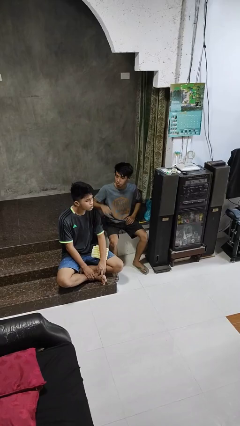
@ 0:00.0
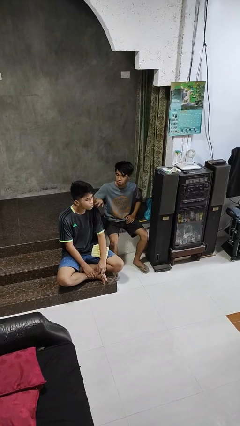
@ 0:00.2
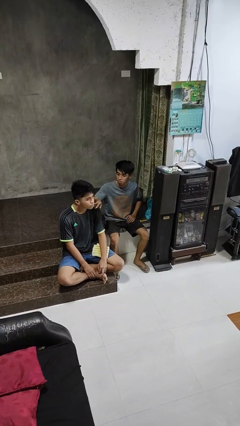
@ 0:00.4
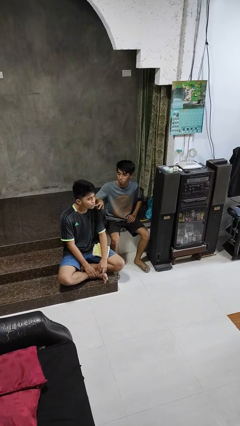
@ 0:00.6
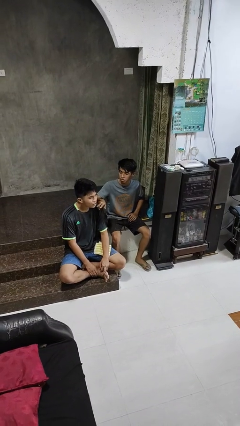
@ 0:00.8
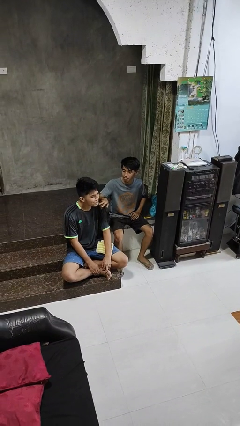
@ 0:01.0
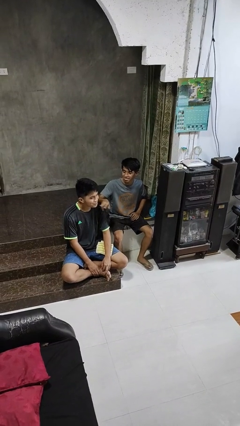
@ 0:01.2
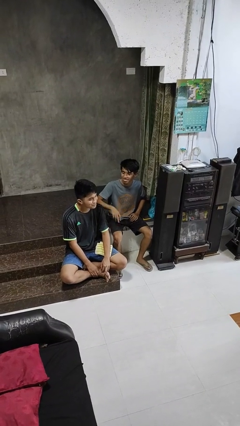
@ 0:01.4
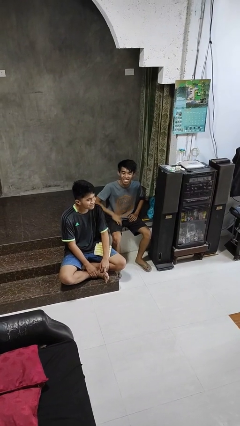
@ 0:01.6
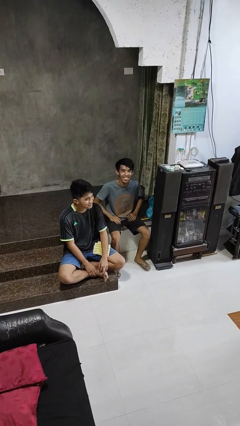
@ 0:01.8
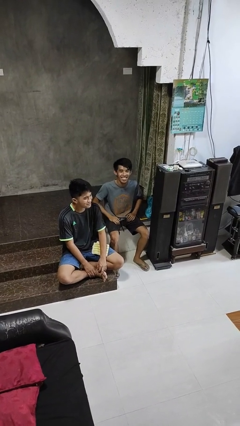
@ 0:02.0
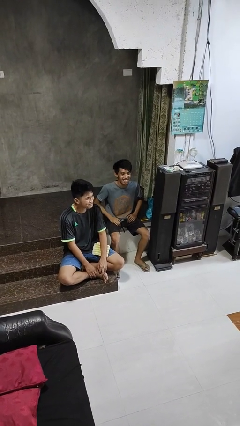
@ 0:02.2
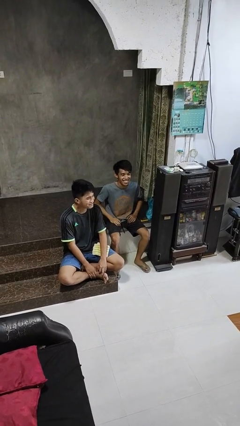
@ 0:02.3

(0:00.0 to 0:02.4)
person touches face of person

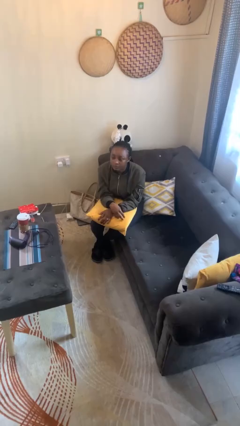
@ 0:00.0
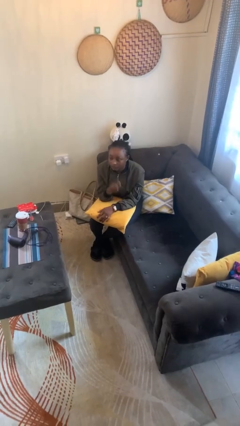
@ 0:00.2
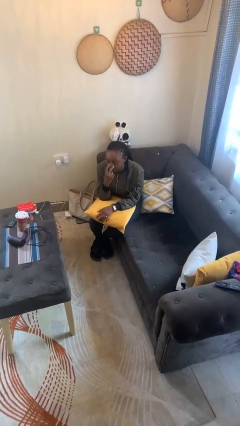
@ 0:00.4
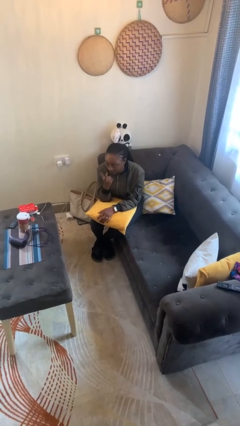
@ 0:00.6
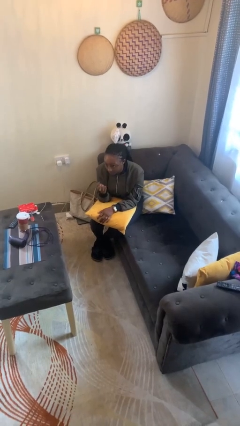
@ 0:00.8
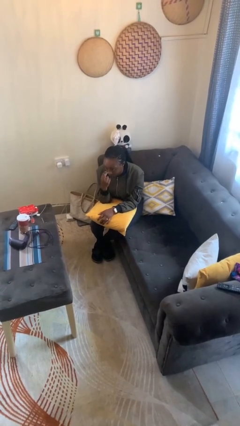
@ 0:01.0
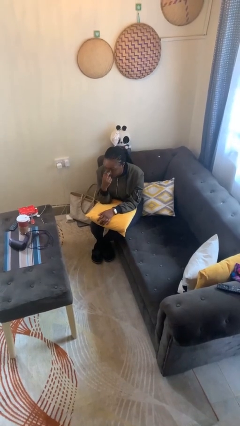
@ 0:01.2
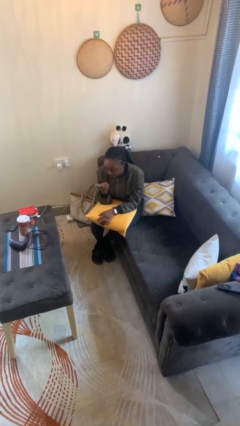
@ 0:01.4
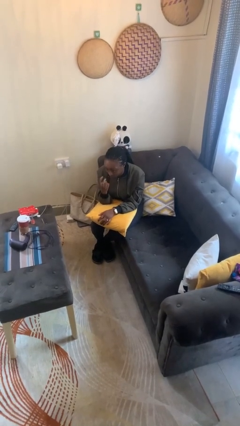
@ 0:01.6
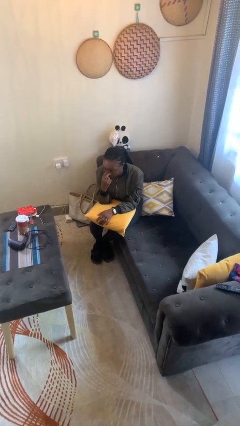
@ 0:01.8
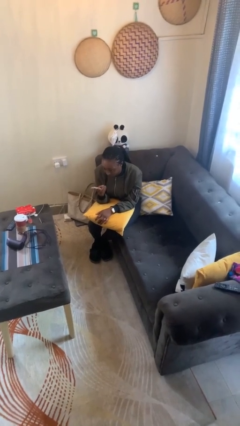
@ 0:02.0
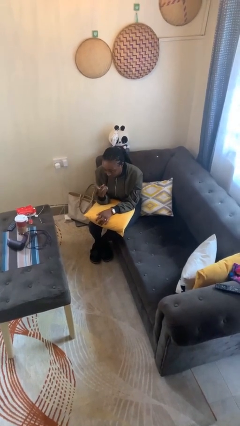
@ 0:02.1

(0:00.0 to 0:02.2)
person gestures watch closely

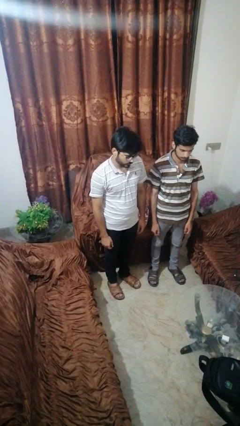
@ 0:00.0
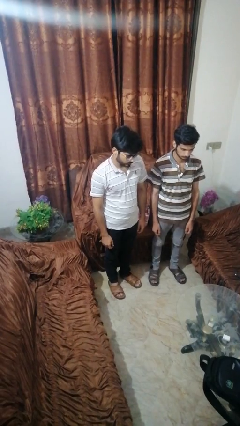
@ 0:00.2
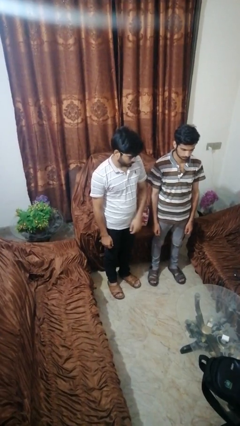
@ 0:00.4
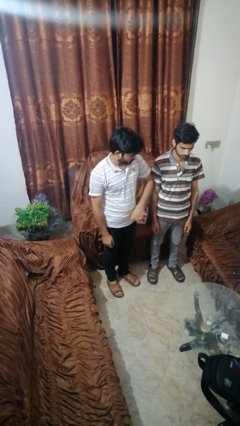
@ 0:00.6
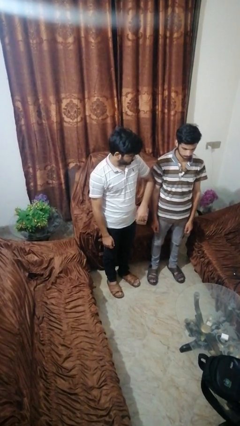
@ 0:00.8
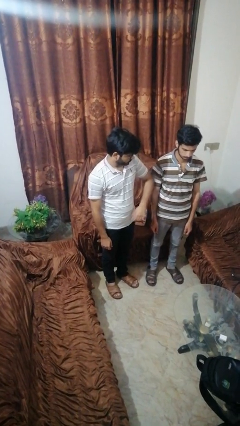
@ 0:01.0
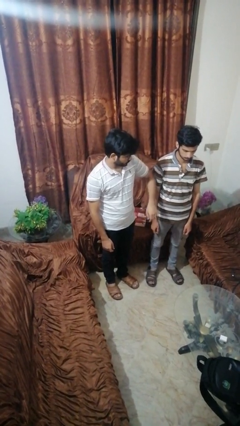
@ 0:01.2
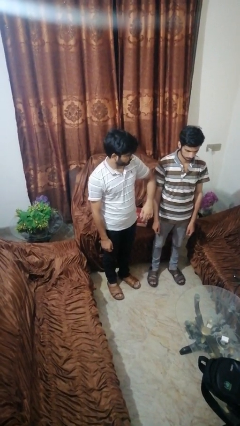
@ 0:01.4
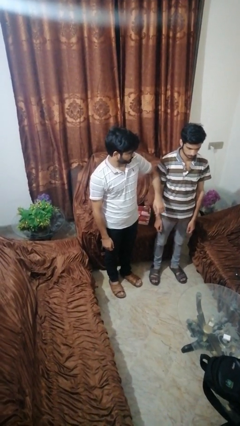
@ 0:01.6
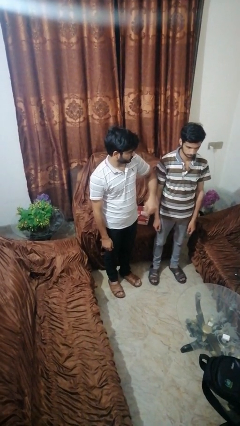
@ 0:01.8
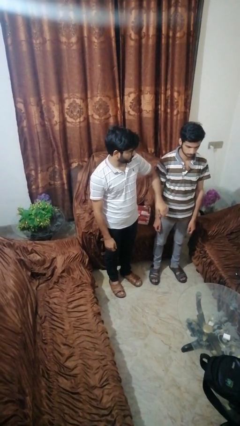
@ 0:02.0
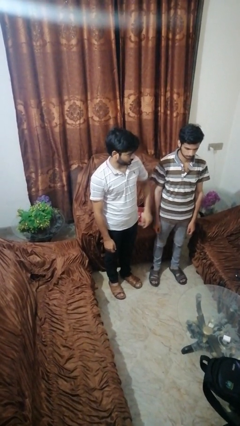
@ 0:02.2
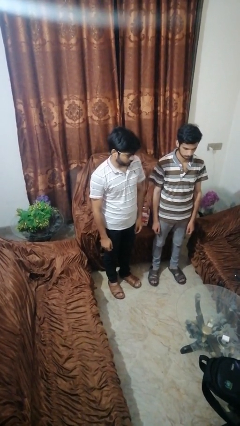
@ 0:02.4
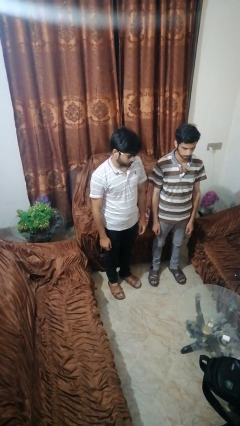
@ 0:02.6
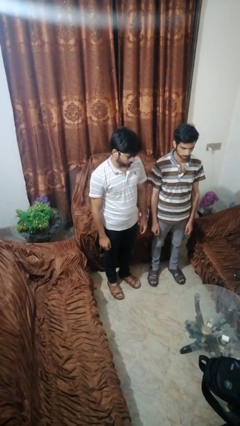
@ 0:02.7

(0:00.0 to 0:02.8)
person nudges person with elbow

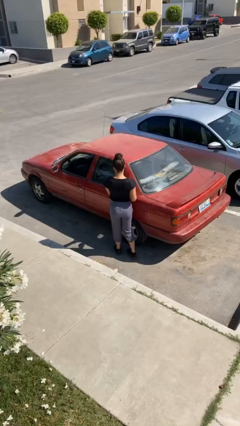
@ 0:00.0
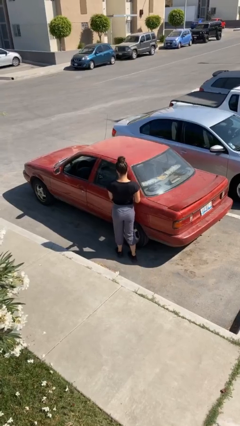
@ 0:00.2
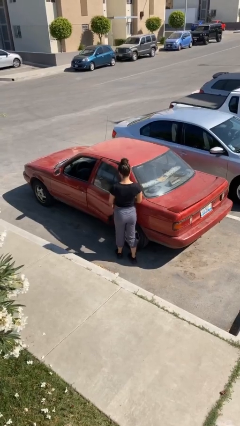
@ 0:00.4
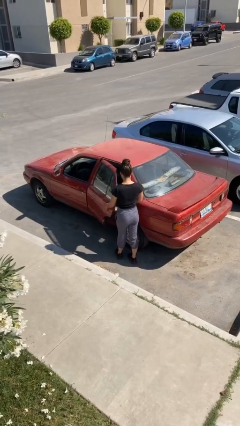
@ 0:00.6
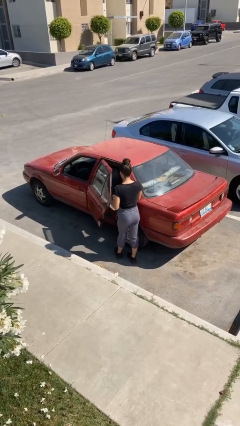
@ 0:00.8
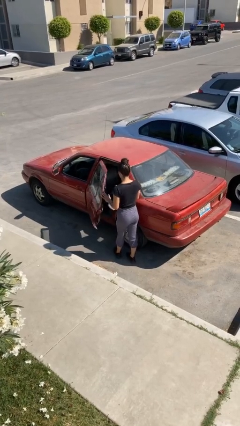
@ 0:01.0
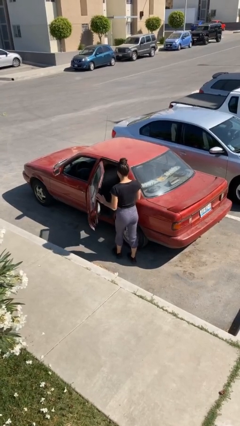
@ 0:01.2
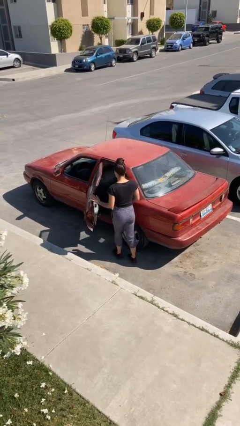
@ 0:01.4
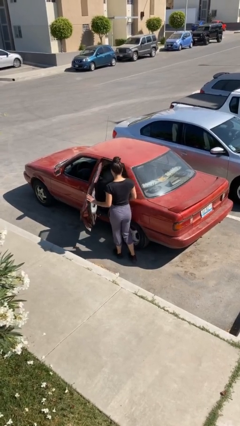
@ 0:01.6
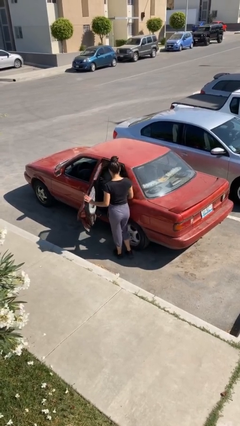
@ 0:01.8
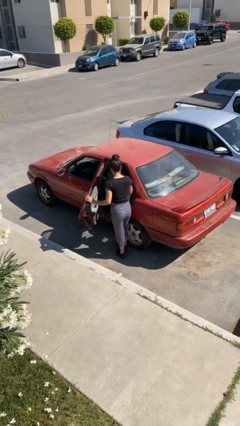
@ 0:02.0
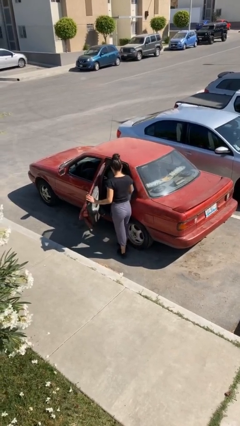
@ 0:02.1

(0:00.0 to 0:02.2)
person opens car door

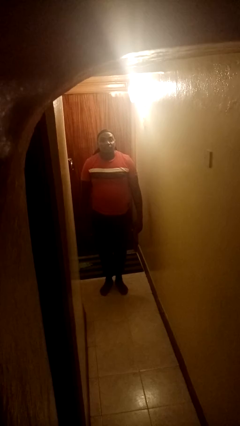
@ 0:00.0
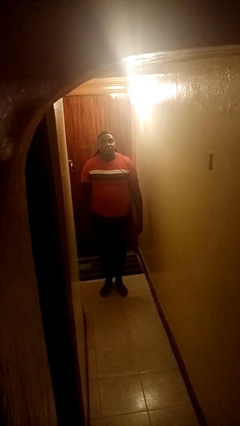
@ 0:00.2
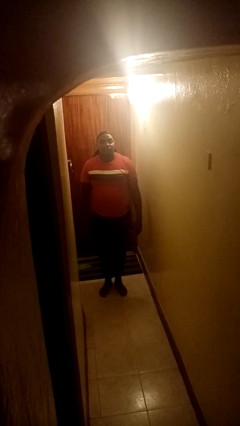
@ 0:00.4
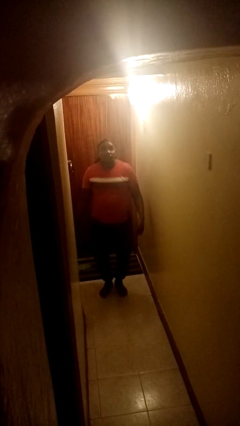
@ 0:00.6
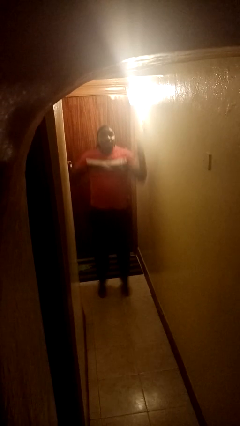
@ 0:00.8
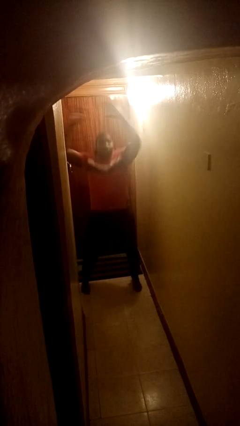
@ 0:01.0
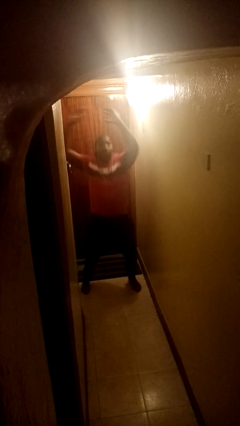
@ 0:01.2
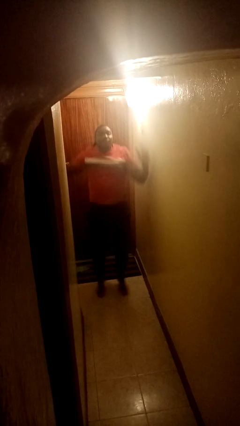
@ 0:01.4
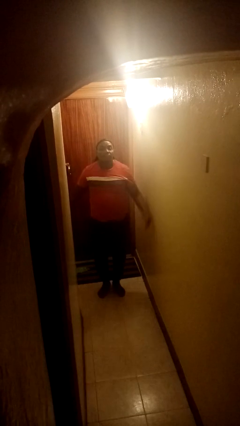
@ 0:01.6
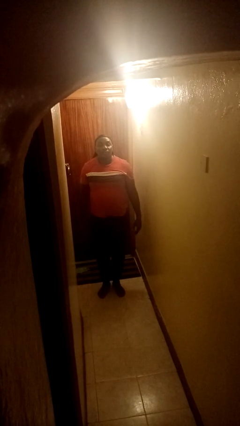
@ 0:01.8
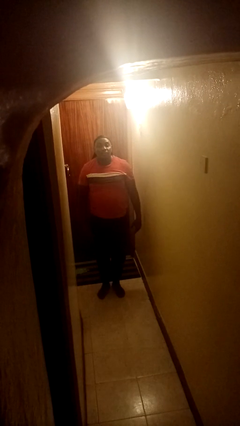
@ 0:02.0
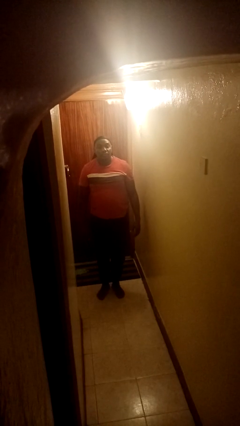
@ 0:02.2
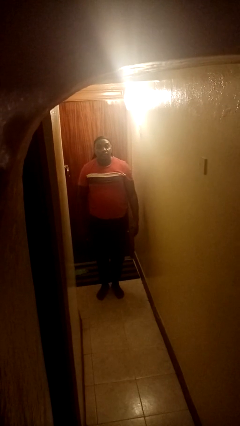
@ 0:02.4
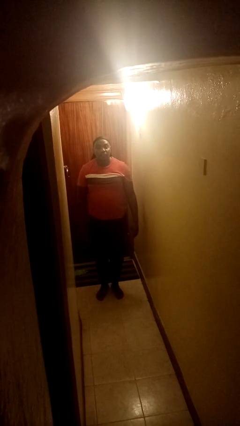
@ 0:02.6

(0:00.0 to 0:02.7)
person exercises with jumping jacks

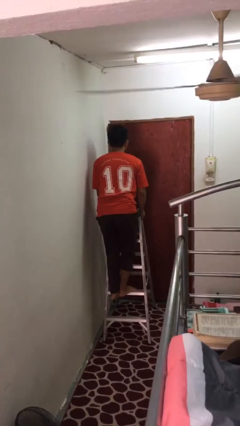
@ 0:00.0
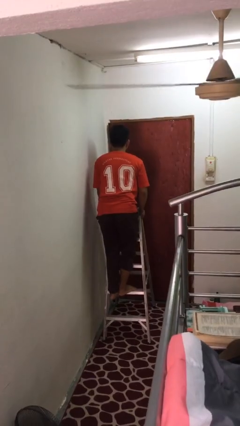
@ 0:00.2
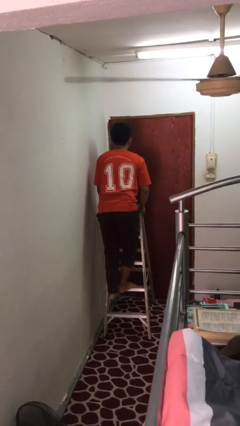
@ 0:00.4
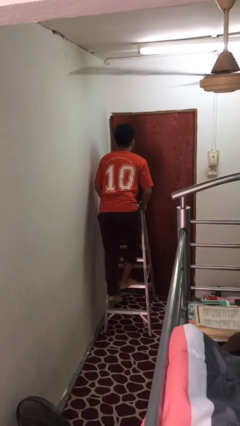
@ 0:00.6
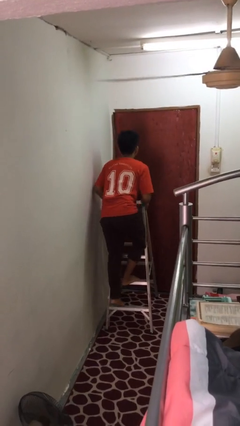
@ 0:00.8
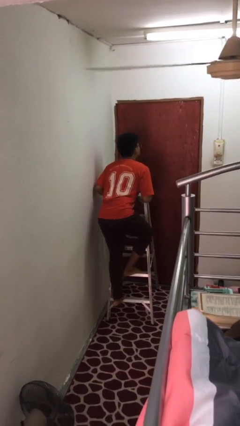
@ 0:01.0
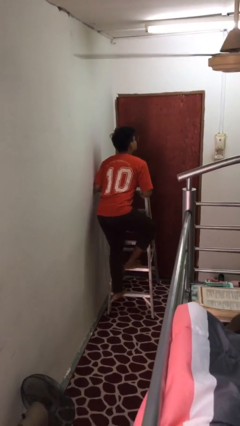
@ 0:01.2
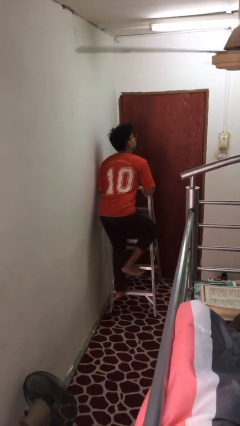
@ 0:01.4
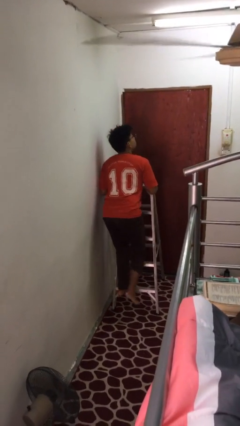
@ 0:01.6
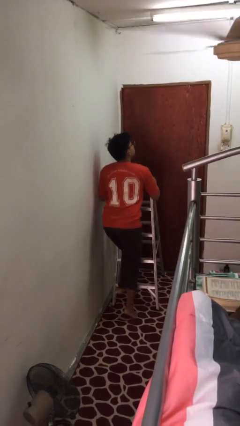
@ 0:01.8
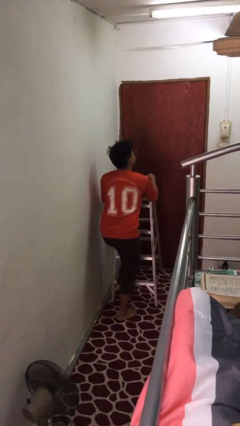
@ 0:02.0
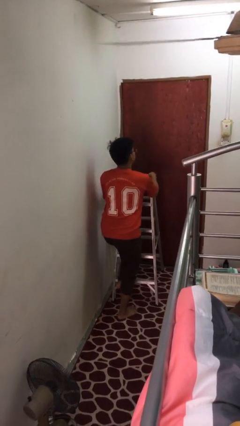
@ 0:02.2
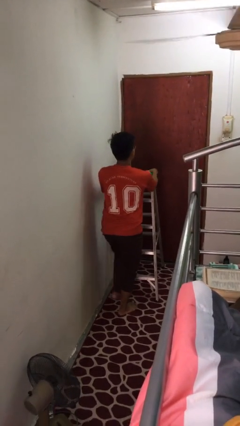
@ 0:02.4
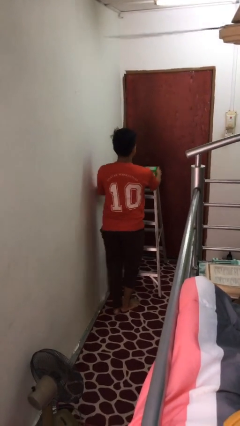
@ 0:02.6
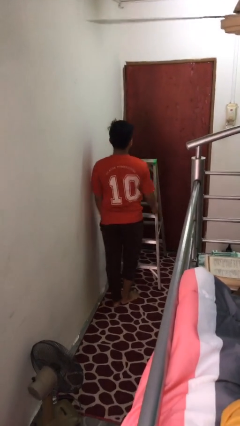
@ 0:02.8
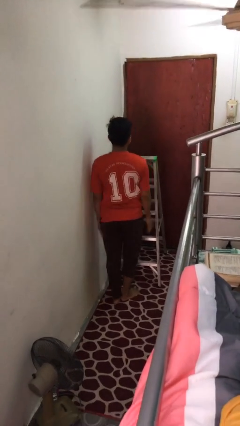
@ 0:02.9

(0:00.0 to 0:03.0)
person climbs down ladder

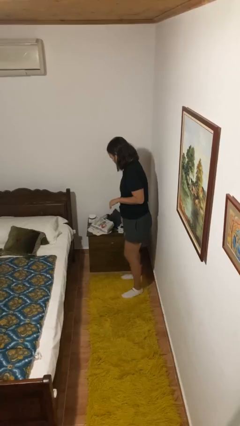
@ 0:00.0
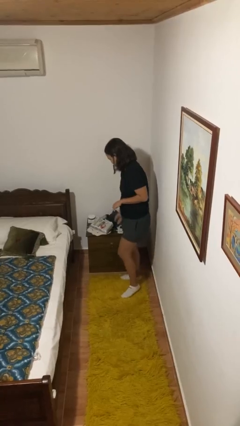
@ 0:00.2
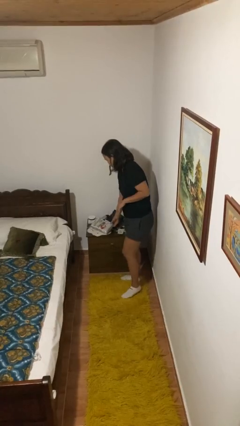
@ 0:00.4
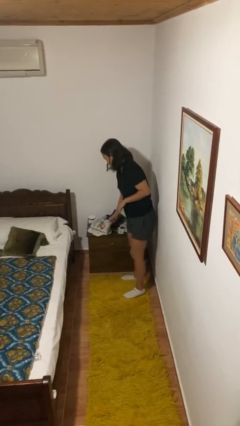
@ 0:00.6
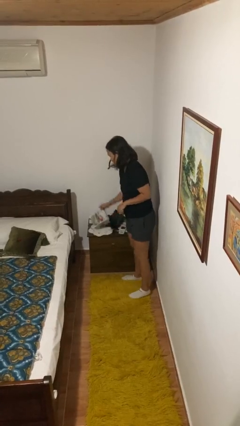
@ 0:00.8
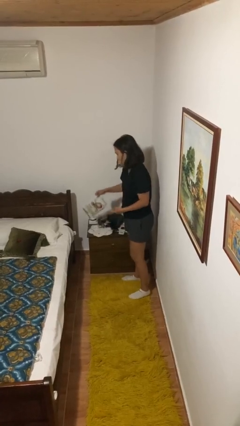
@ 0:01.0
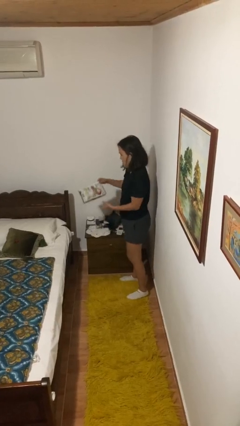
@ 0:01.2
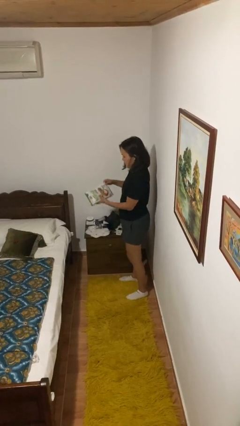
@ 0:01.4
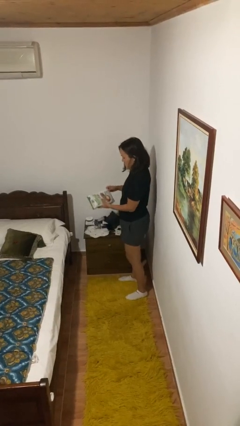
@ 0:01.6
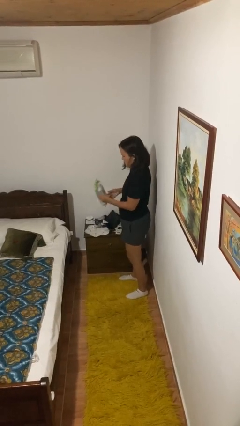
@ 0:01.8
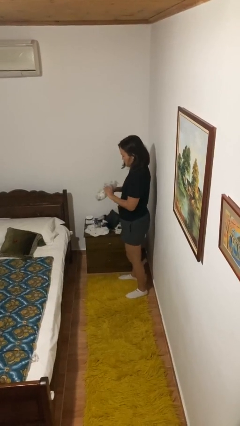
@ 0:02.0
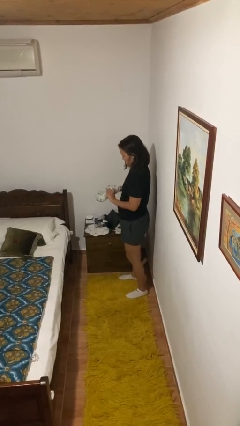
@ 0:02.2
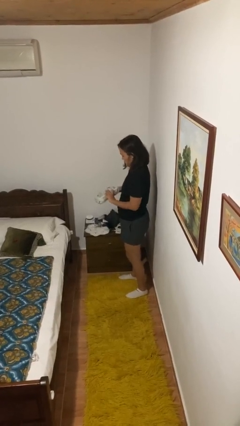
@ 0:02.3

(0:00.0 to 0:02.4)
person picks up object from countertop
